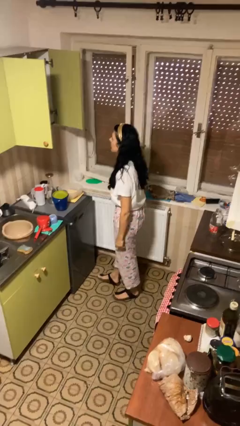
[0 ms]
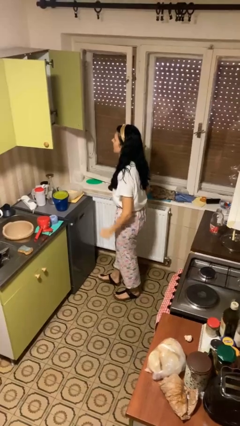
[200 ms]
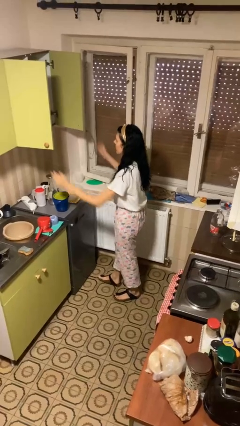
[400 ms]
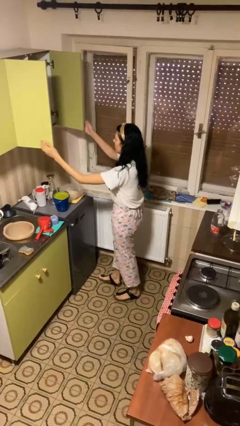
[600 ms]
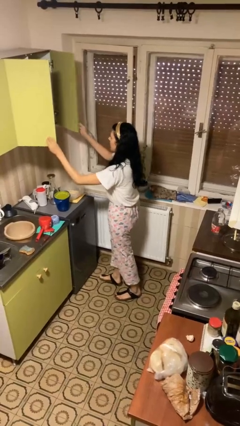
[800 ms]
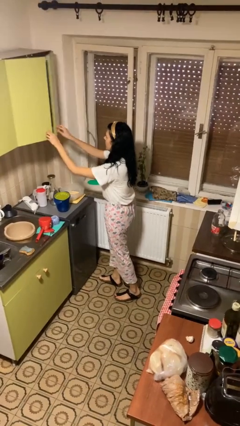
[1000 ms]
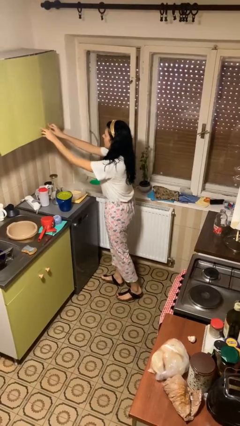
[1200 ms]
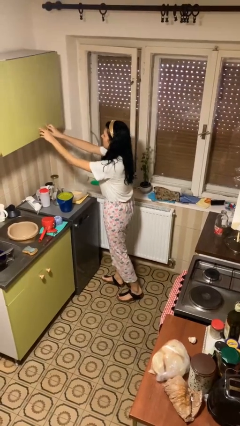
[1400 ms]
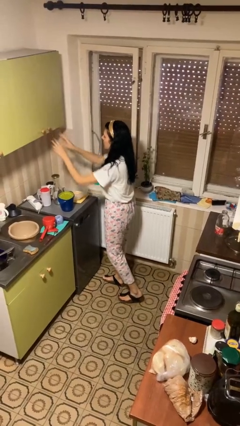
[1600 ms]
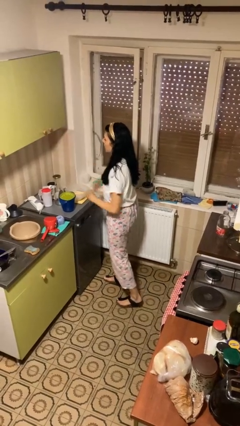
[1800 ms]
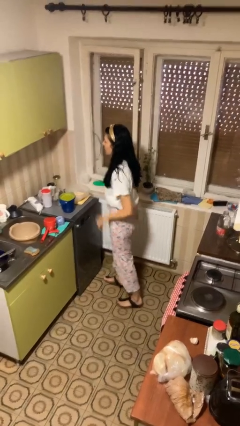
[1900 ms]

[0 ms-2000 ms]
person closes cabinet

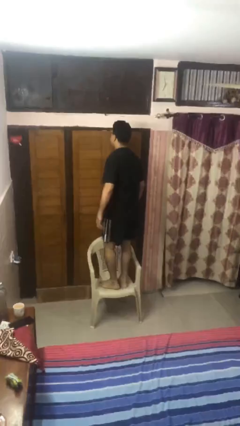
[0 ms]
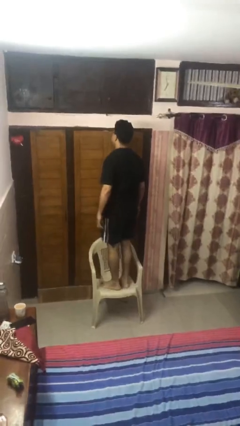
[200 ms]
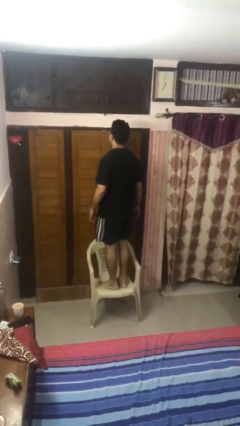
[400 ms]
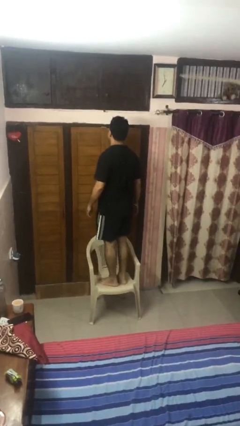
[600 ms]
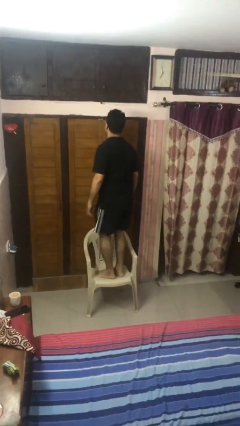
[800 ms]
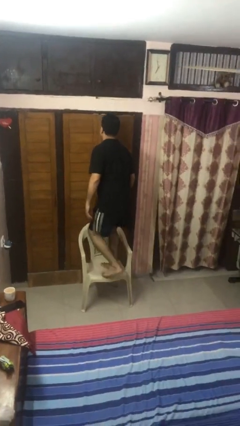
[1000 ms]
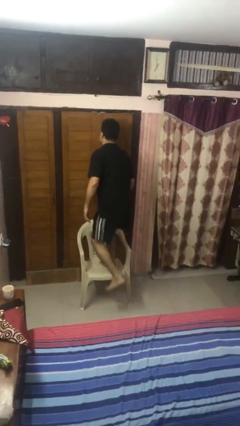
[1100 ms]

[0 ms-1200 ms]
person climbs off chair

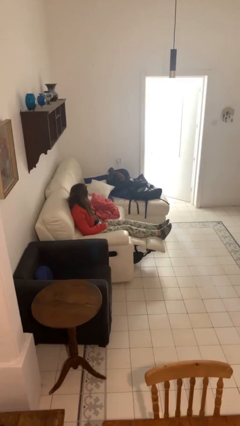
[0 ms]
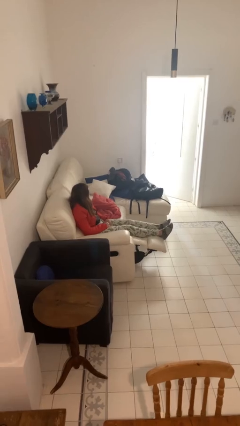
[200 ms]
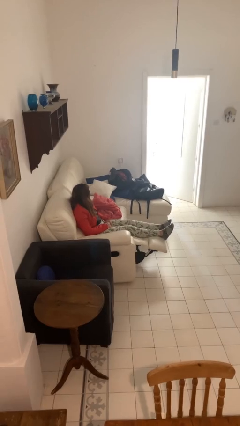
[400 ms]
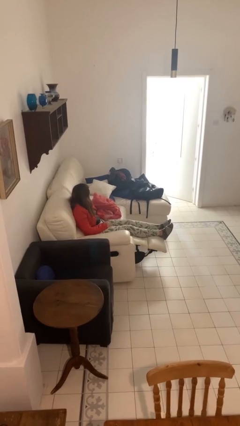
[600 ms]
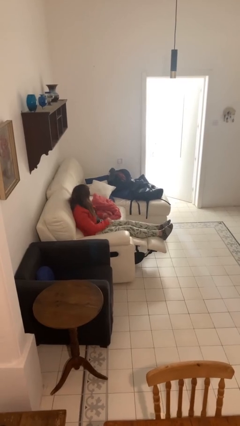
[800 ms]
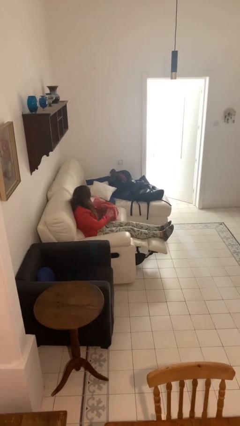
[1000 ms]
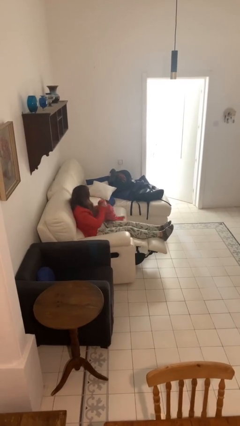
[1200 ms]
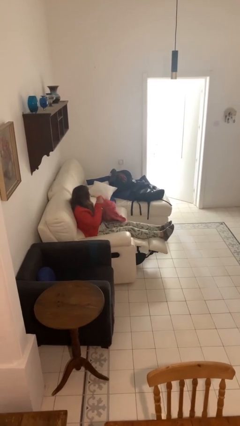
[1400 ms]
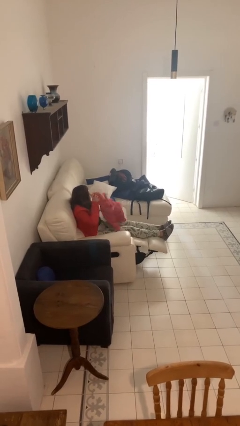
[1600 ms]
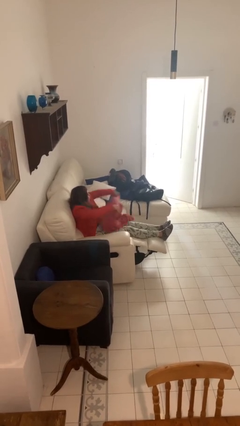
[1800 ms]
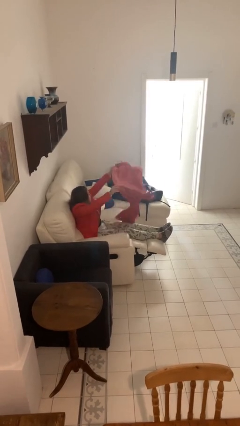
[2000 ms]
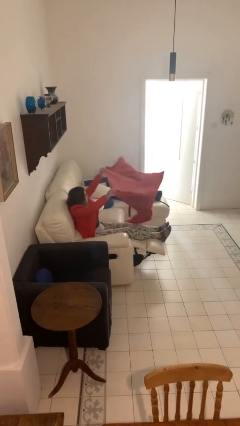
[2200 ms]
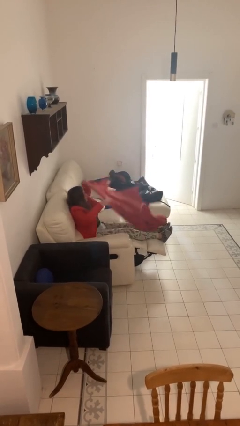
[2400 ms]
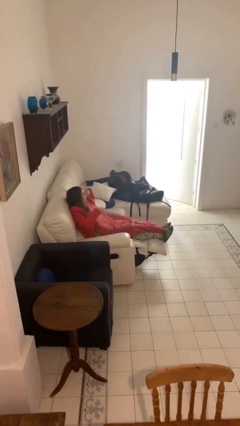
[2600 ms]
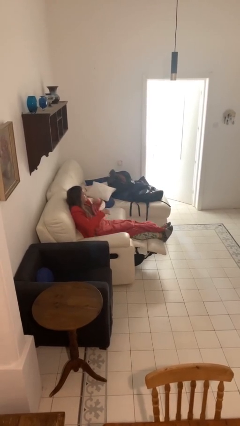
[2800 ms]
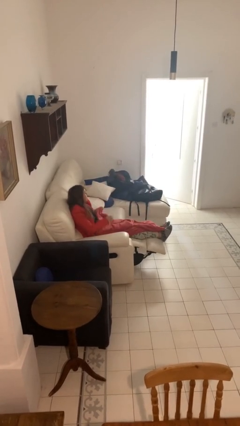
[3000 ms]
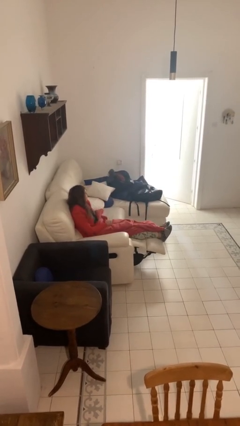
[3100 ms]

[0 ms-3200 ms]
person covers with blanket

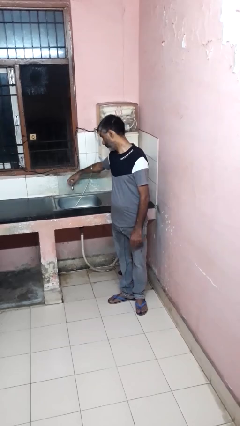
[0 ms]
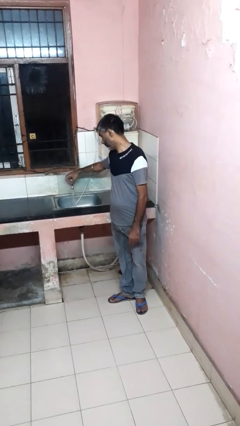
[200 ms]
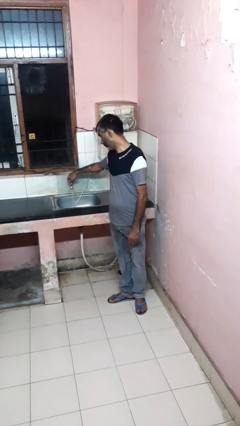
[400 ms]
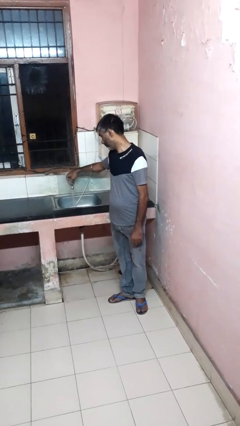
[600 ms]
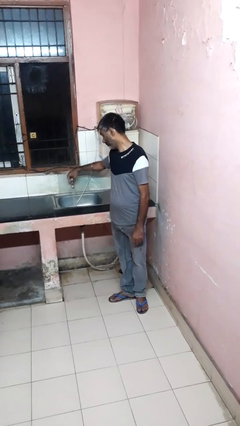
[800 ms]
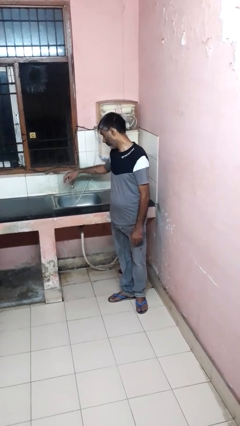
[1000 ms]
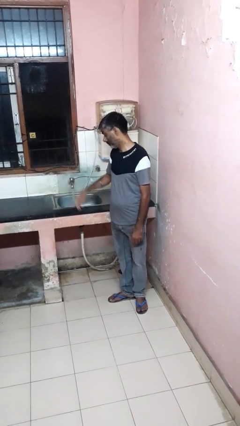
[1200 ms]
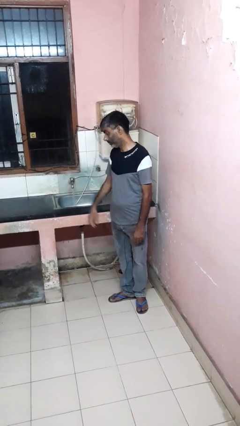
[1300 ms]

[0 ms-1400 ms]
person turns on faucet

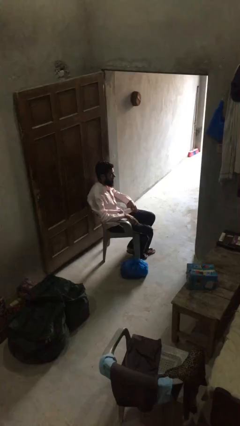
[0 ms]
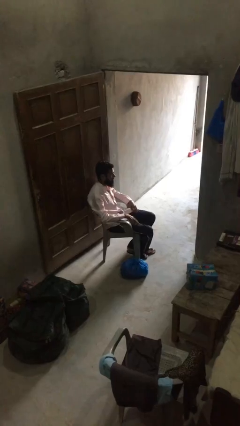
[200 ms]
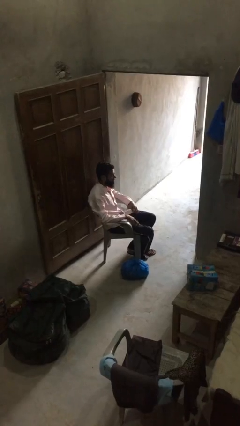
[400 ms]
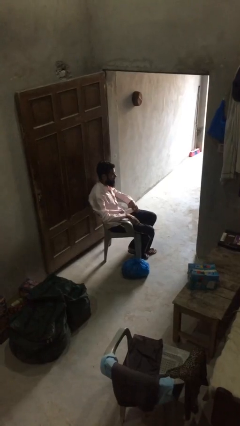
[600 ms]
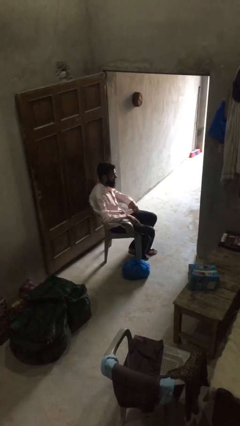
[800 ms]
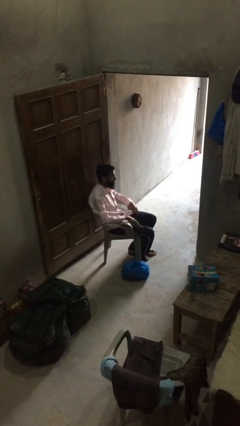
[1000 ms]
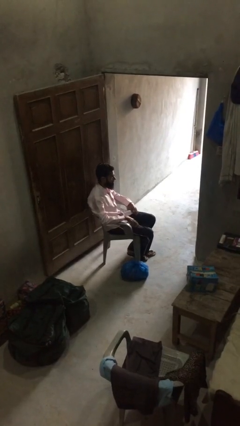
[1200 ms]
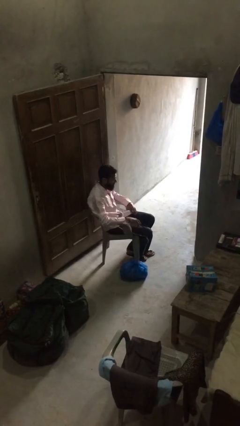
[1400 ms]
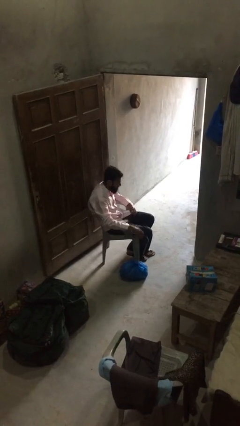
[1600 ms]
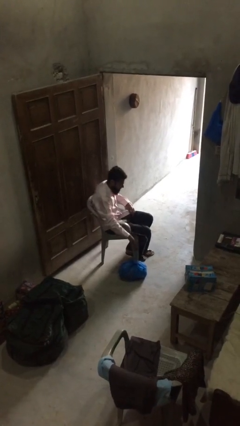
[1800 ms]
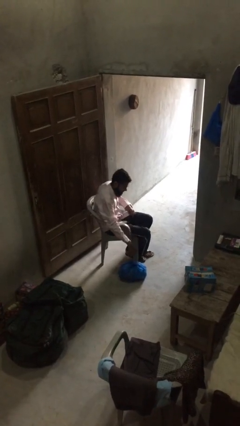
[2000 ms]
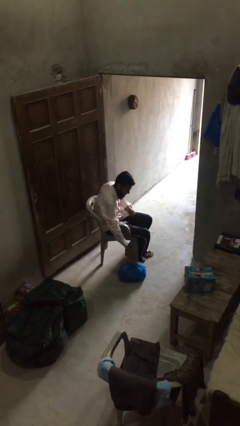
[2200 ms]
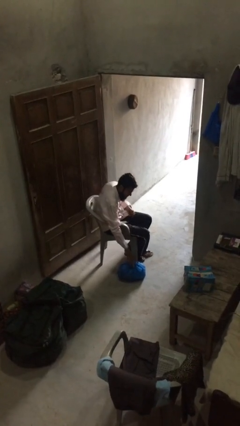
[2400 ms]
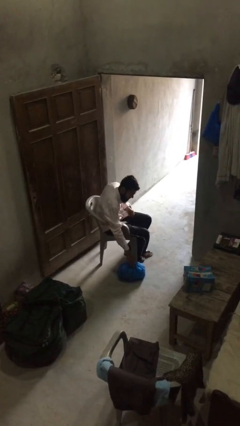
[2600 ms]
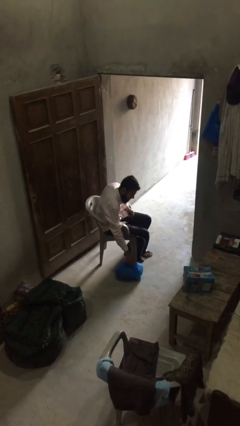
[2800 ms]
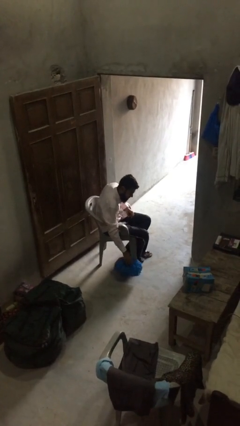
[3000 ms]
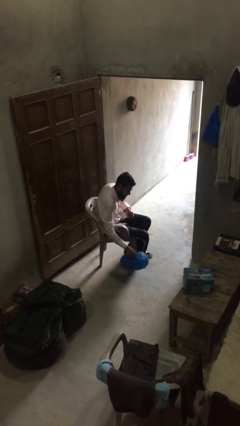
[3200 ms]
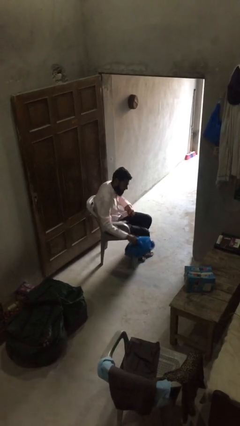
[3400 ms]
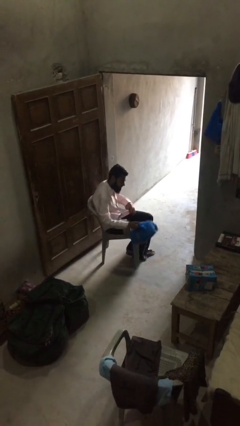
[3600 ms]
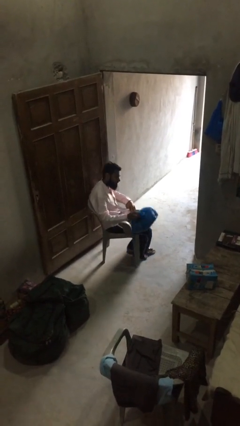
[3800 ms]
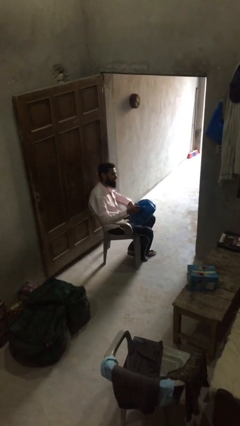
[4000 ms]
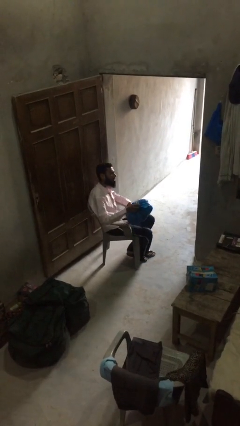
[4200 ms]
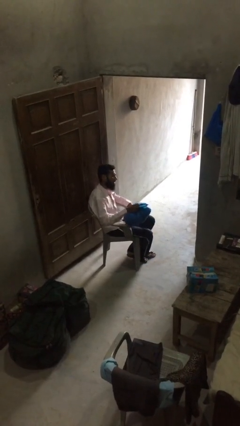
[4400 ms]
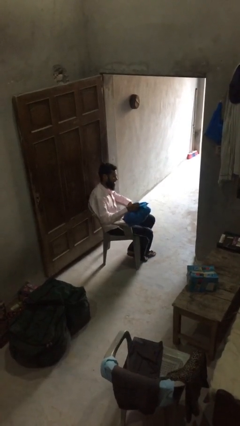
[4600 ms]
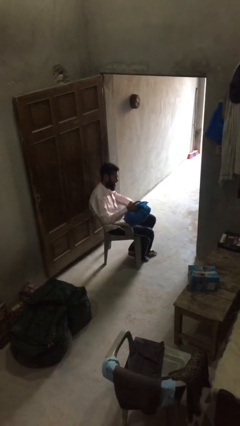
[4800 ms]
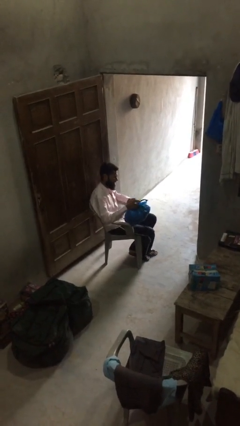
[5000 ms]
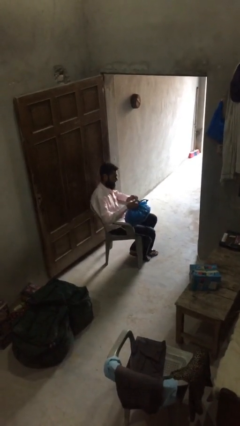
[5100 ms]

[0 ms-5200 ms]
person picks up object from floor

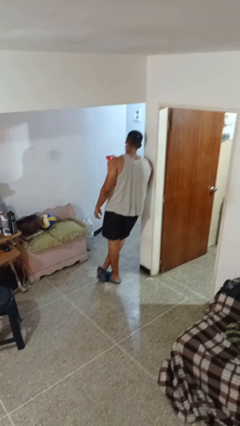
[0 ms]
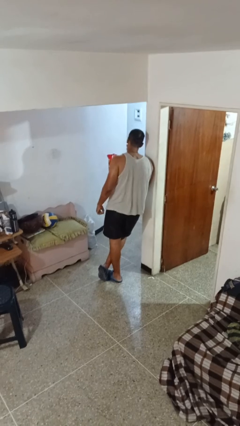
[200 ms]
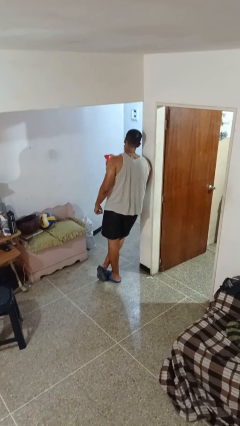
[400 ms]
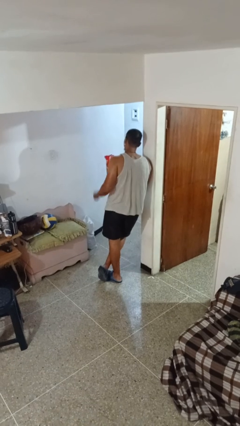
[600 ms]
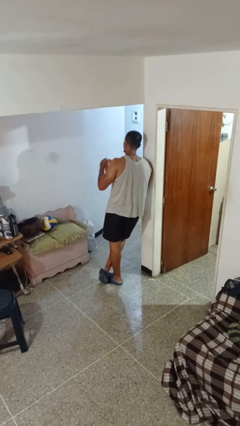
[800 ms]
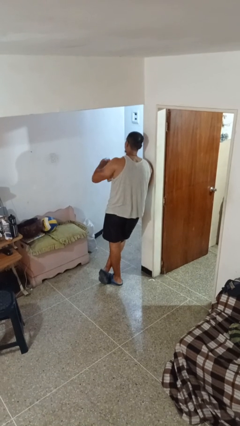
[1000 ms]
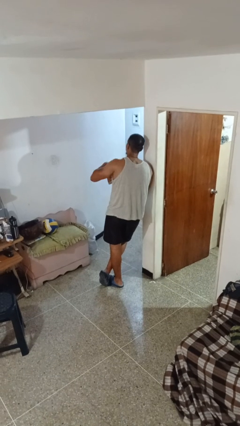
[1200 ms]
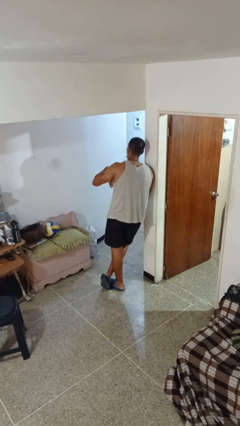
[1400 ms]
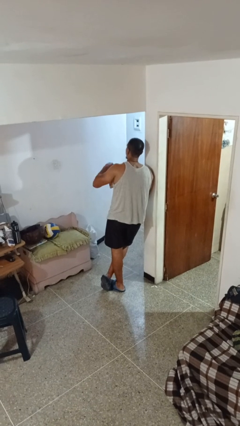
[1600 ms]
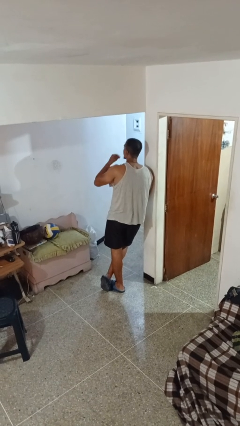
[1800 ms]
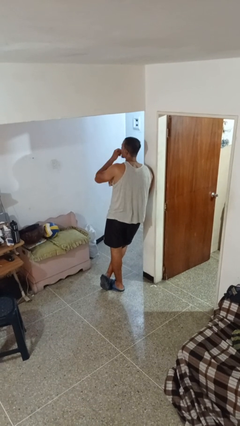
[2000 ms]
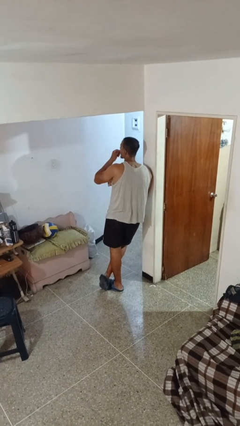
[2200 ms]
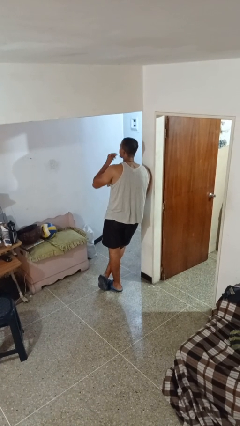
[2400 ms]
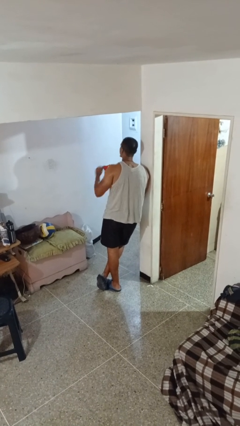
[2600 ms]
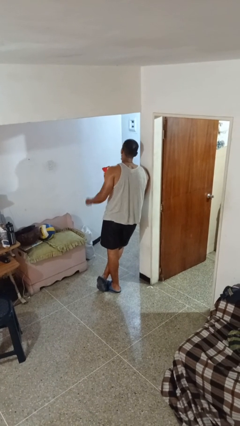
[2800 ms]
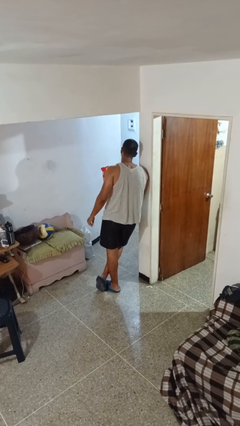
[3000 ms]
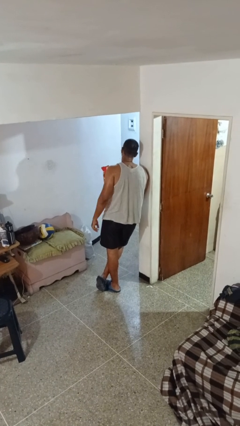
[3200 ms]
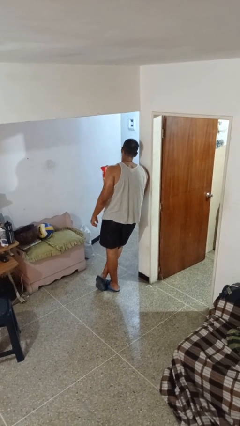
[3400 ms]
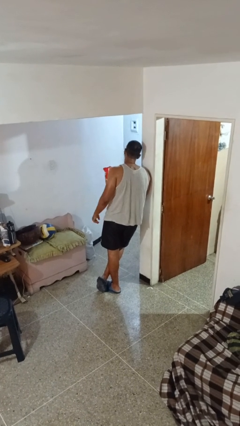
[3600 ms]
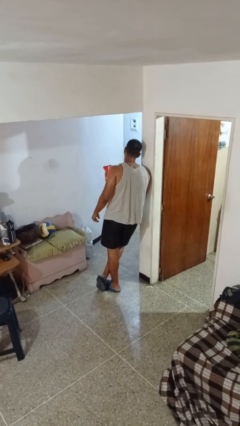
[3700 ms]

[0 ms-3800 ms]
person eats snack from bag

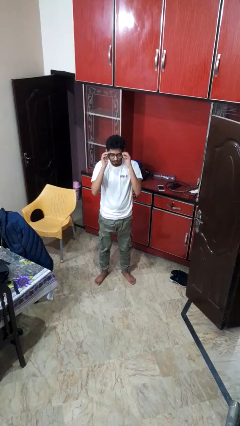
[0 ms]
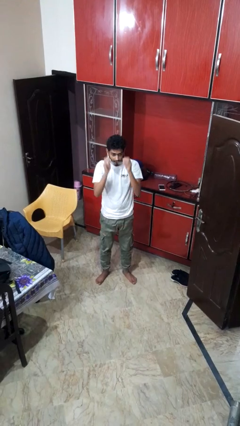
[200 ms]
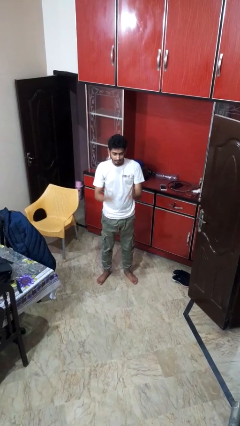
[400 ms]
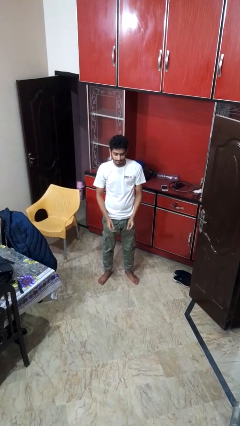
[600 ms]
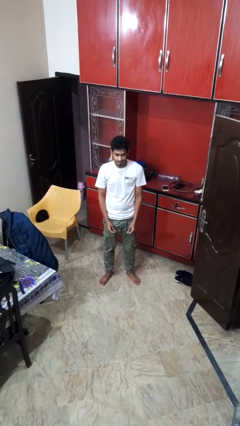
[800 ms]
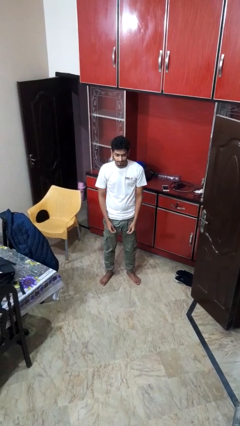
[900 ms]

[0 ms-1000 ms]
person takes off glasses
